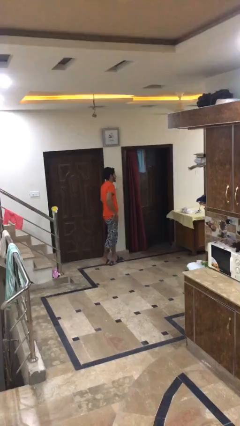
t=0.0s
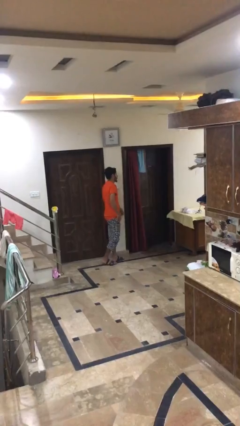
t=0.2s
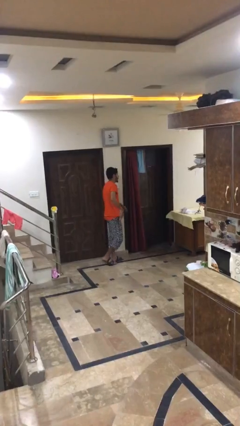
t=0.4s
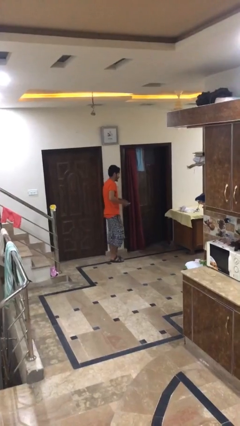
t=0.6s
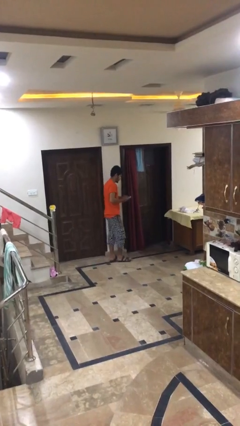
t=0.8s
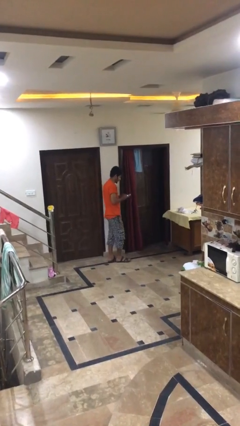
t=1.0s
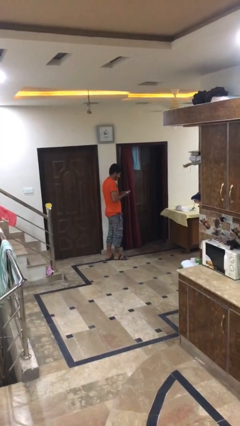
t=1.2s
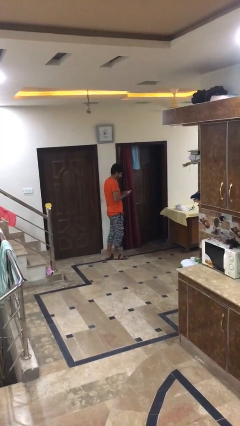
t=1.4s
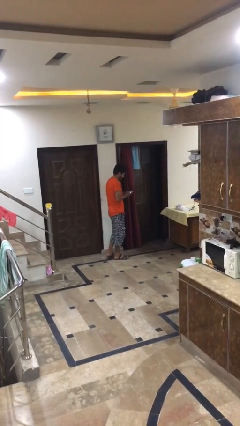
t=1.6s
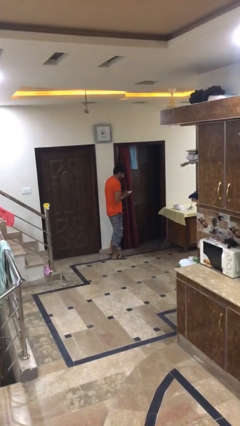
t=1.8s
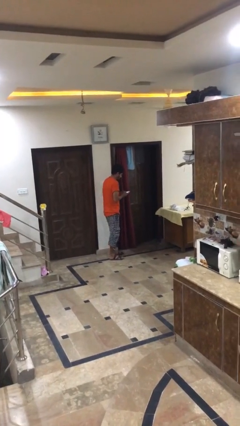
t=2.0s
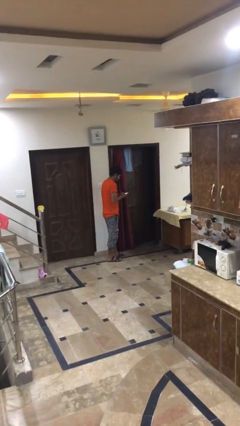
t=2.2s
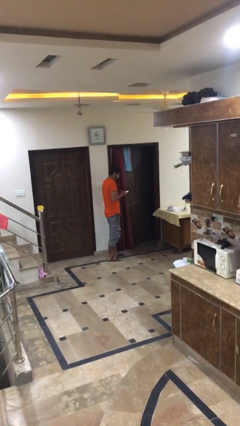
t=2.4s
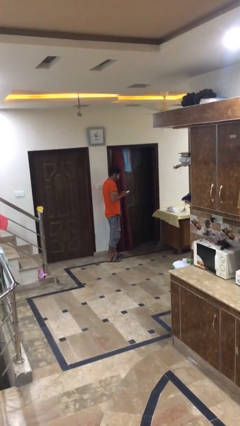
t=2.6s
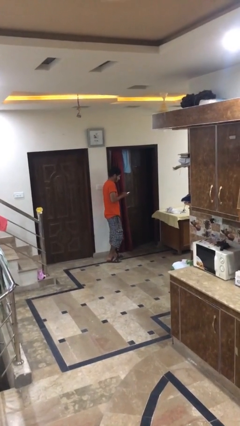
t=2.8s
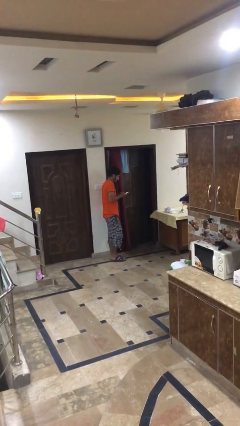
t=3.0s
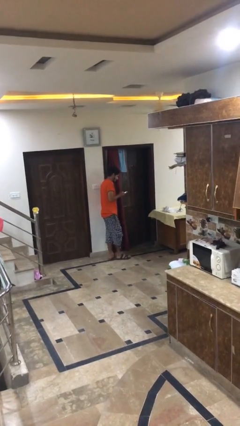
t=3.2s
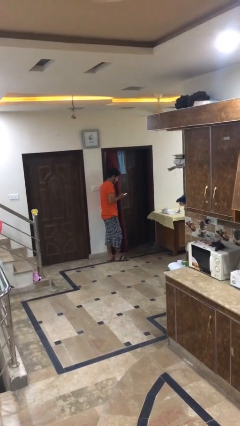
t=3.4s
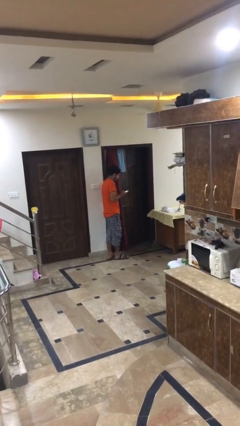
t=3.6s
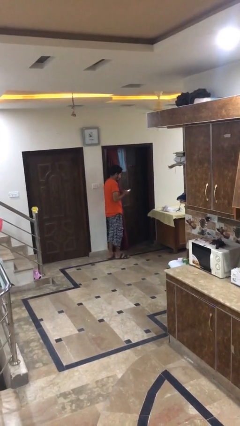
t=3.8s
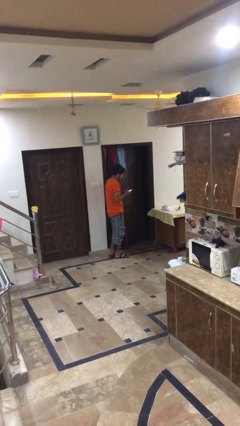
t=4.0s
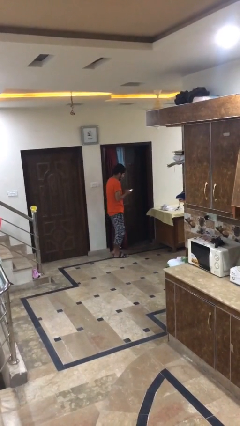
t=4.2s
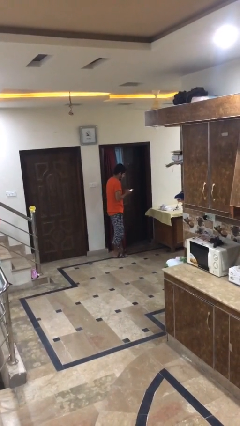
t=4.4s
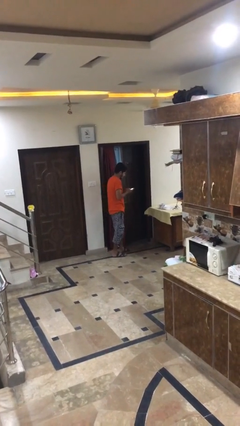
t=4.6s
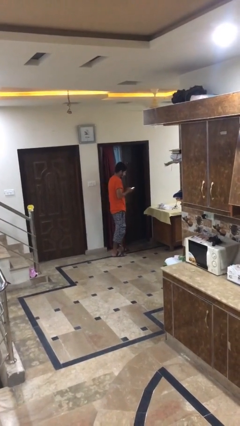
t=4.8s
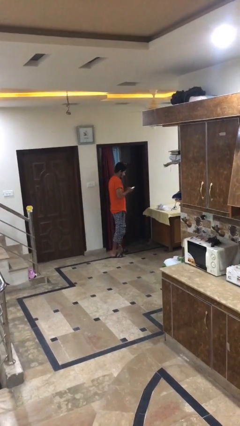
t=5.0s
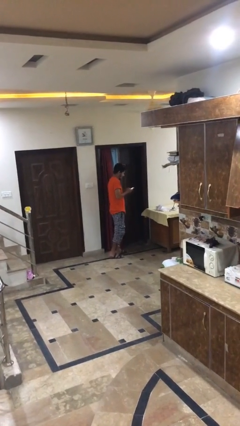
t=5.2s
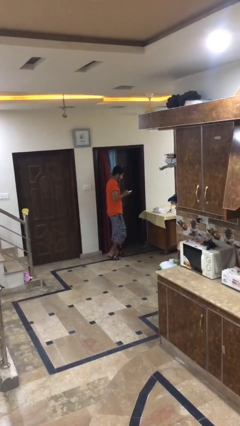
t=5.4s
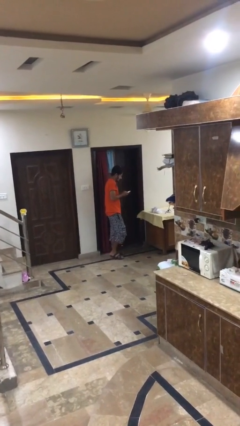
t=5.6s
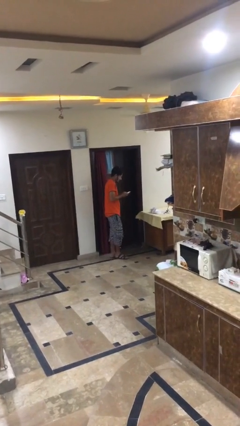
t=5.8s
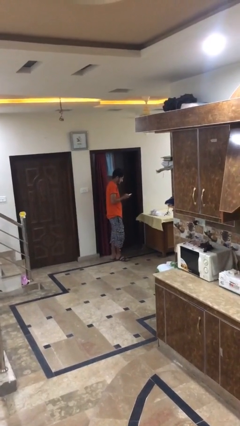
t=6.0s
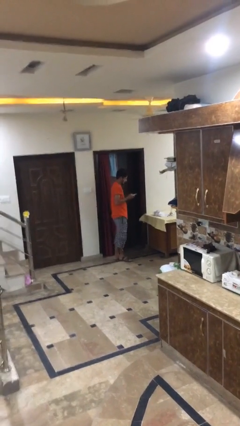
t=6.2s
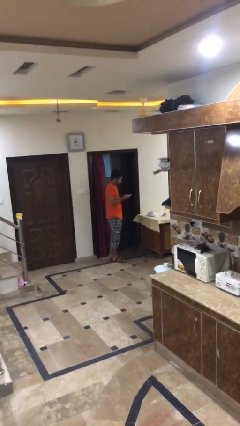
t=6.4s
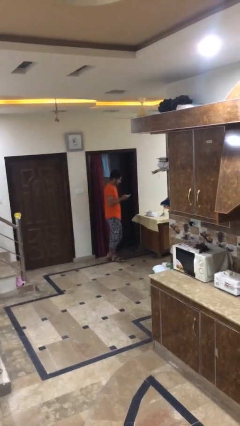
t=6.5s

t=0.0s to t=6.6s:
person texts on phone

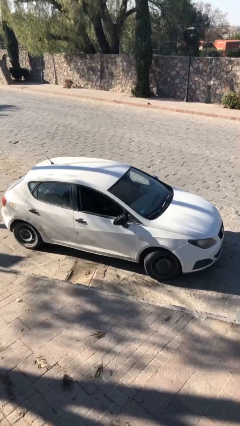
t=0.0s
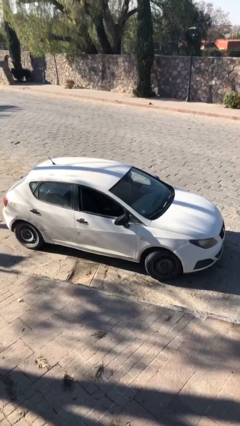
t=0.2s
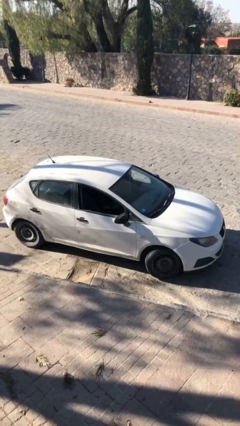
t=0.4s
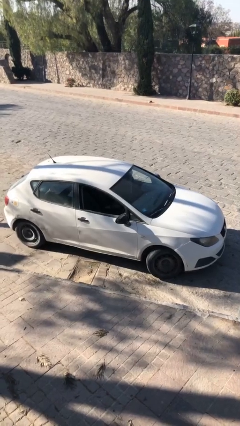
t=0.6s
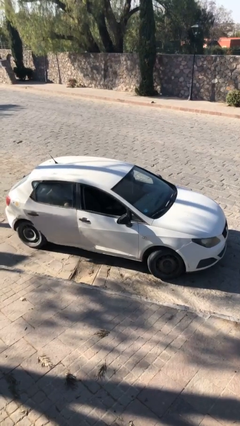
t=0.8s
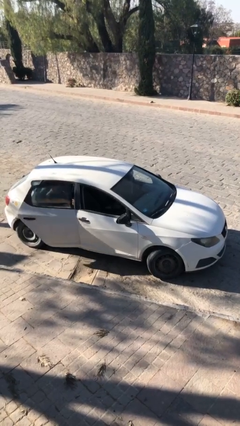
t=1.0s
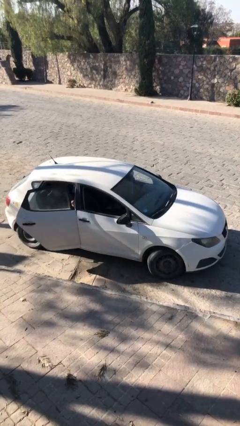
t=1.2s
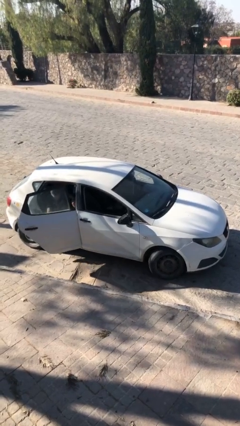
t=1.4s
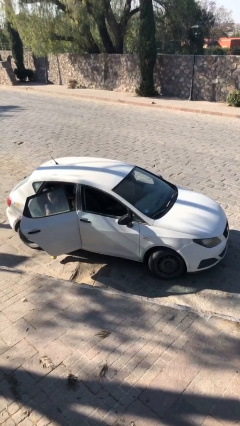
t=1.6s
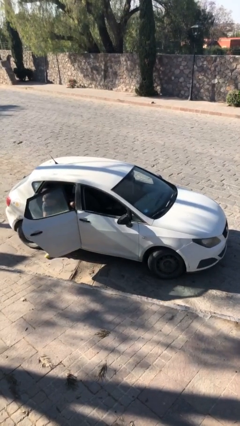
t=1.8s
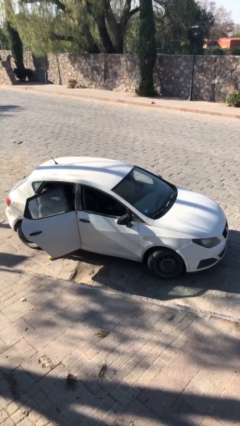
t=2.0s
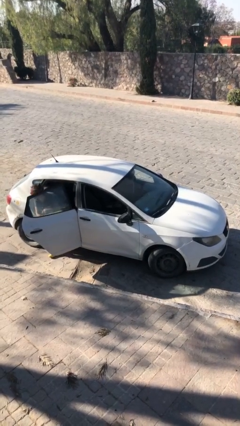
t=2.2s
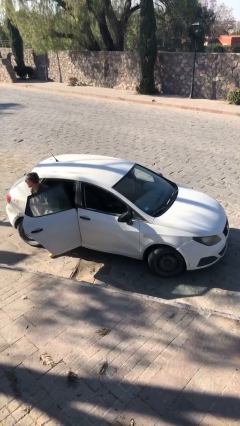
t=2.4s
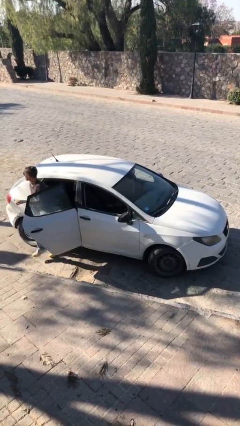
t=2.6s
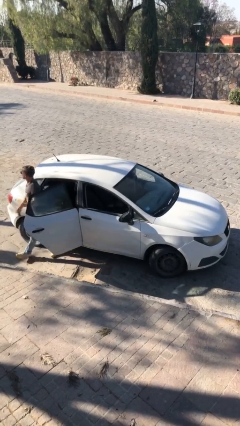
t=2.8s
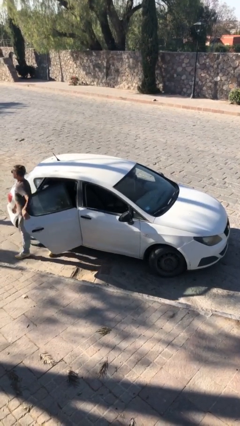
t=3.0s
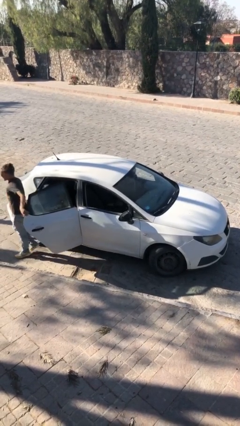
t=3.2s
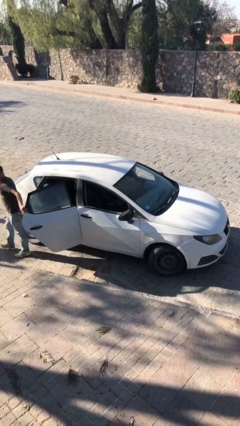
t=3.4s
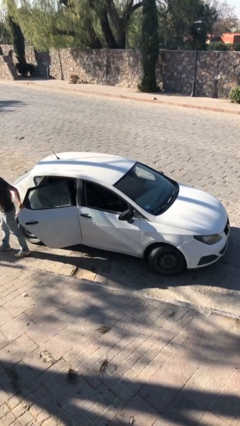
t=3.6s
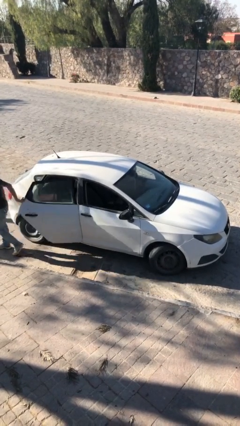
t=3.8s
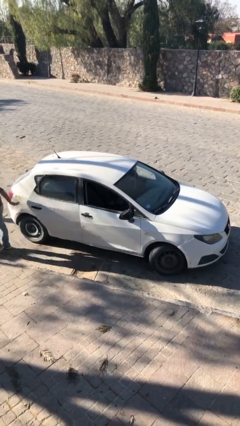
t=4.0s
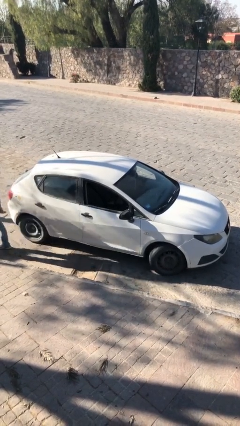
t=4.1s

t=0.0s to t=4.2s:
car drops off person

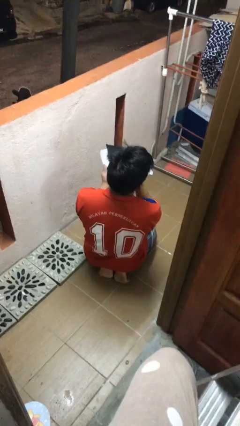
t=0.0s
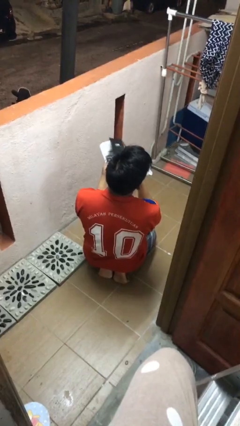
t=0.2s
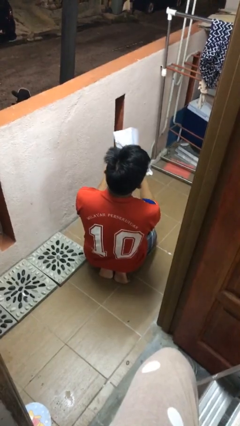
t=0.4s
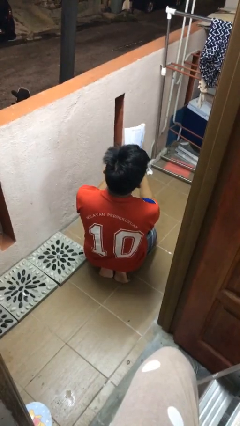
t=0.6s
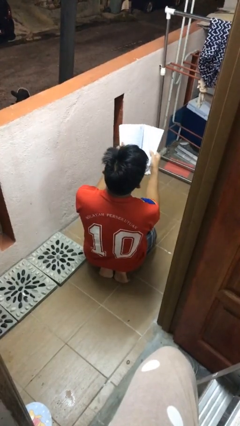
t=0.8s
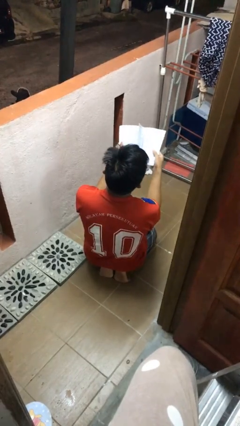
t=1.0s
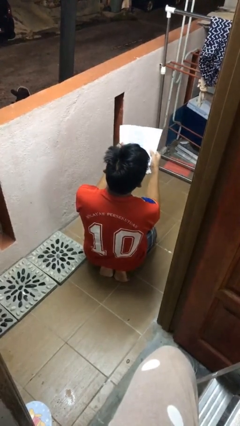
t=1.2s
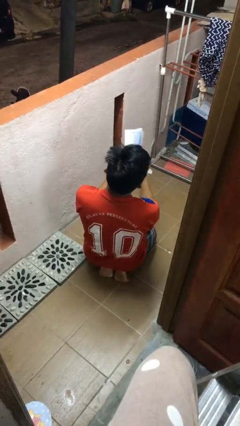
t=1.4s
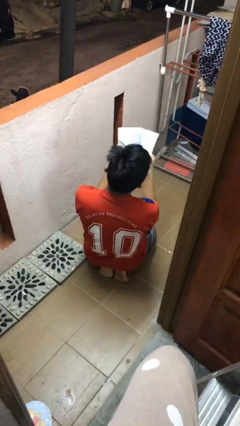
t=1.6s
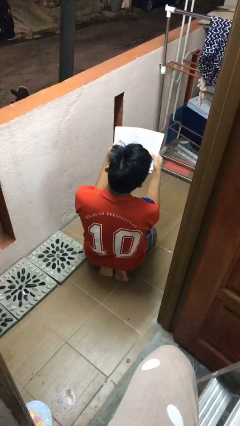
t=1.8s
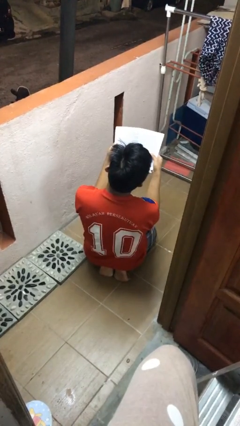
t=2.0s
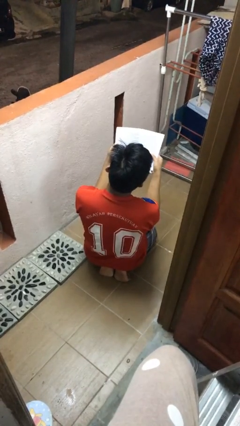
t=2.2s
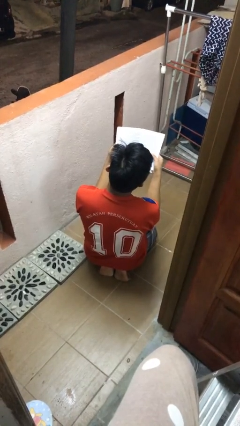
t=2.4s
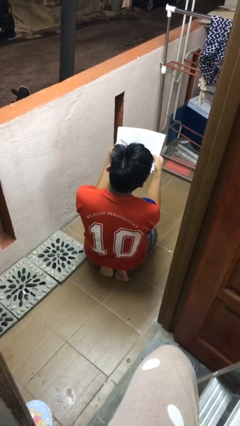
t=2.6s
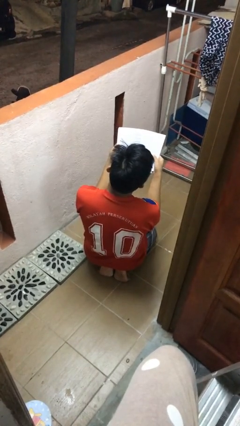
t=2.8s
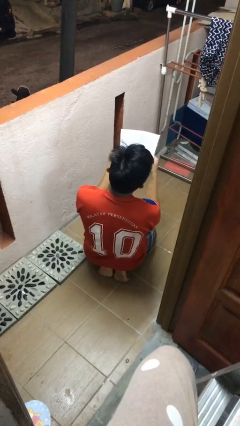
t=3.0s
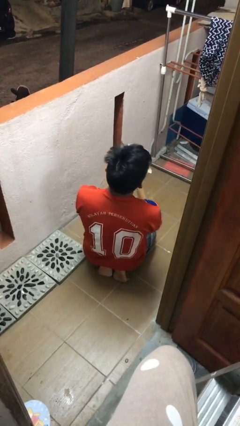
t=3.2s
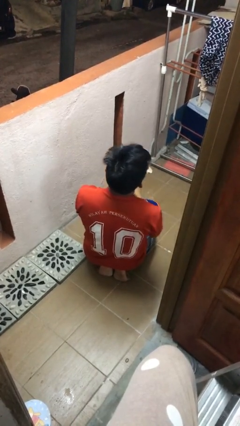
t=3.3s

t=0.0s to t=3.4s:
person reads book

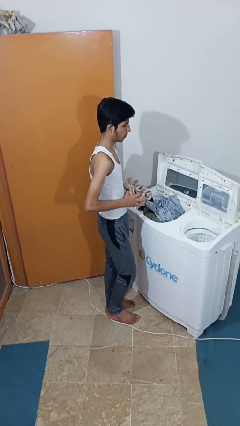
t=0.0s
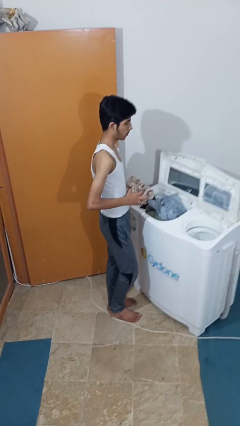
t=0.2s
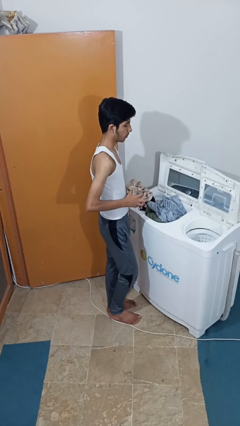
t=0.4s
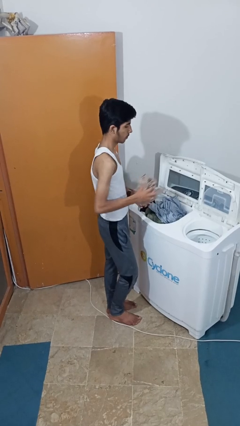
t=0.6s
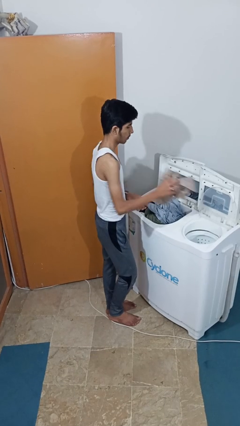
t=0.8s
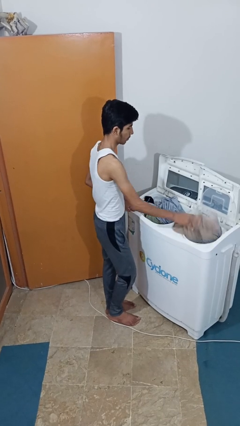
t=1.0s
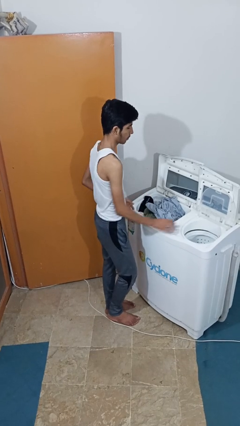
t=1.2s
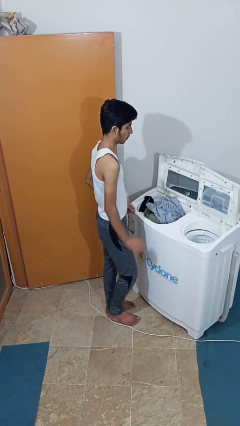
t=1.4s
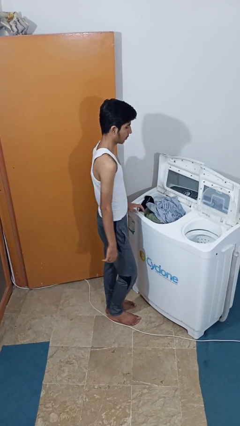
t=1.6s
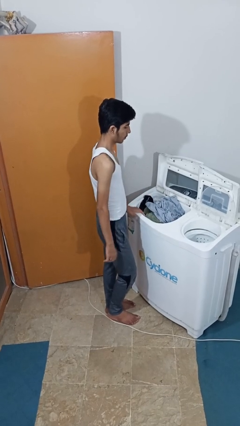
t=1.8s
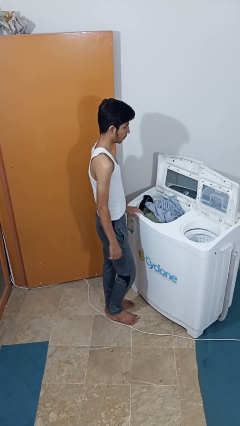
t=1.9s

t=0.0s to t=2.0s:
person loads dryer

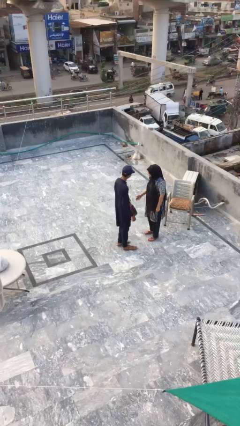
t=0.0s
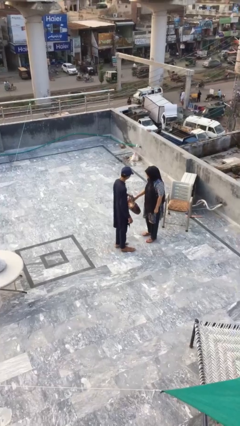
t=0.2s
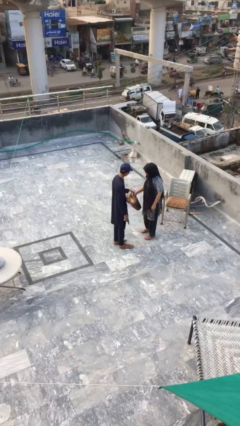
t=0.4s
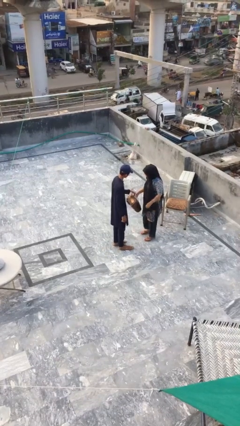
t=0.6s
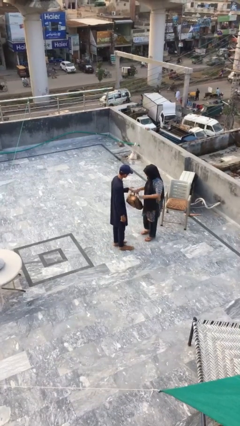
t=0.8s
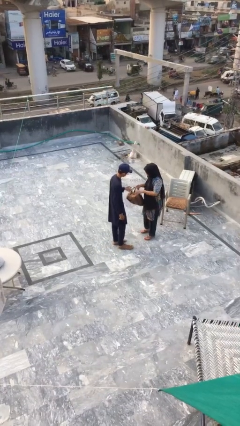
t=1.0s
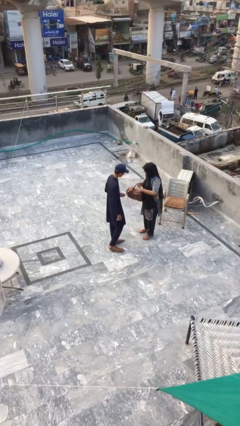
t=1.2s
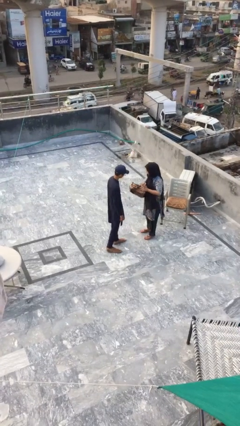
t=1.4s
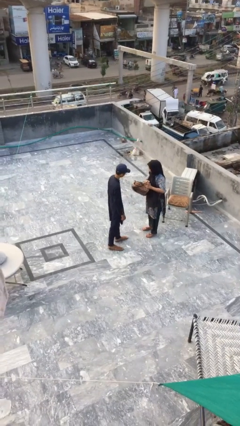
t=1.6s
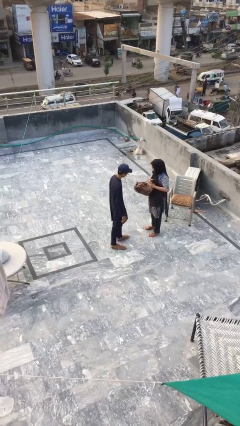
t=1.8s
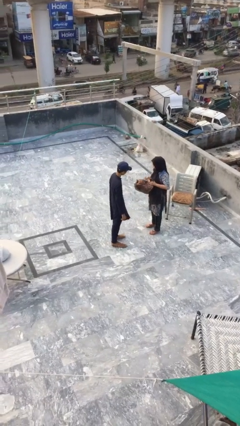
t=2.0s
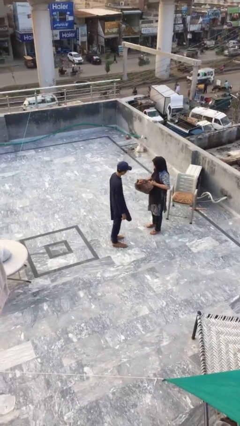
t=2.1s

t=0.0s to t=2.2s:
person transfers object to person
